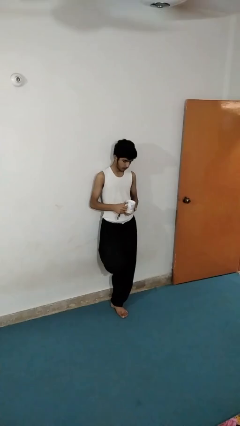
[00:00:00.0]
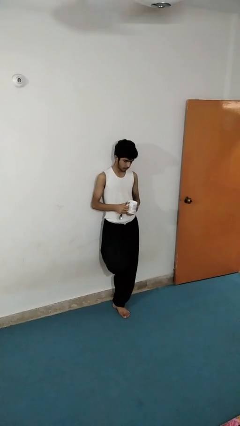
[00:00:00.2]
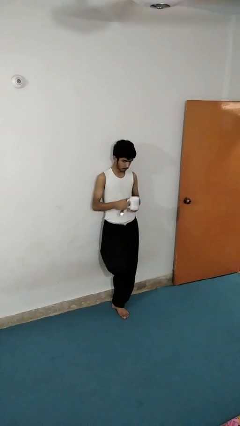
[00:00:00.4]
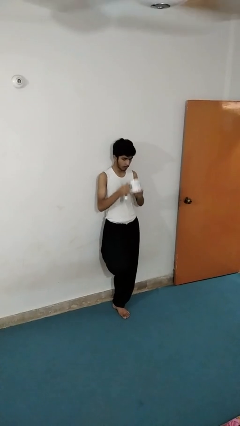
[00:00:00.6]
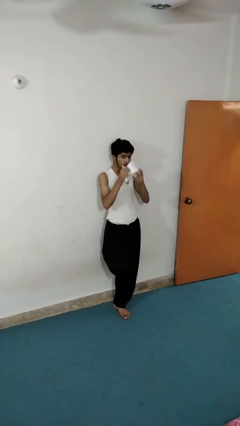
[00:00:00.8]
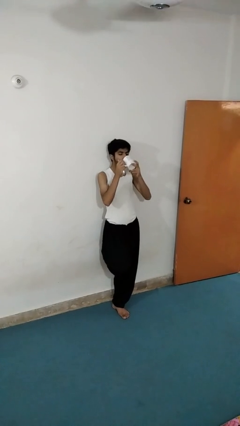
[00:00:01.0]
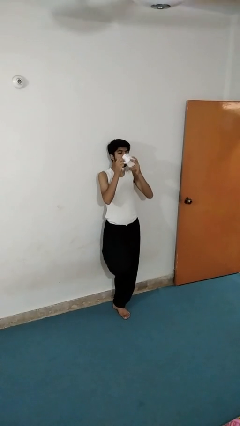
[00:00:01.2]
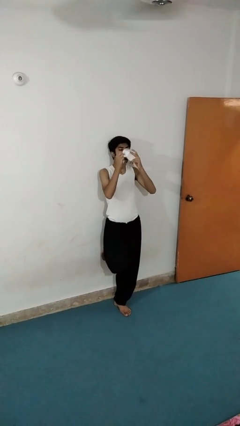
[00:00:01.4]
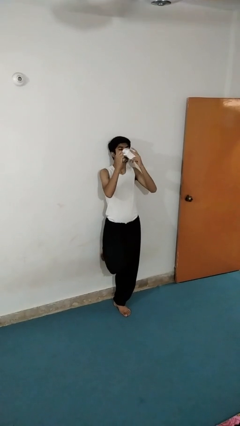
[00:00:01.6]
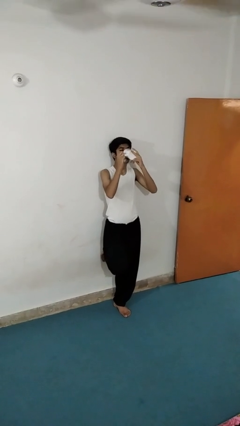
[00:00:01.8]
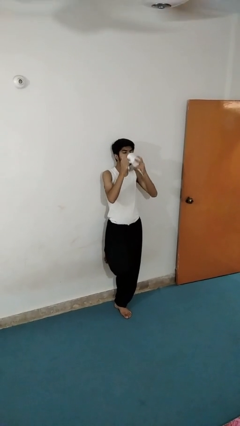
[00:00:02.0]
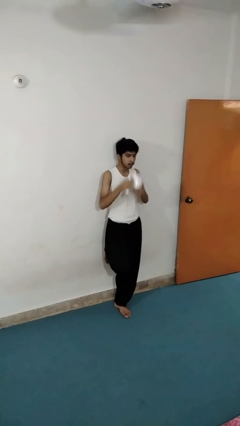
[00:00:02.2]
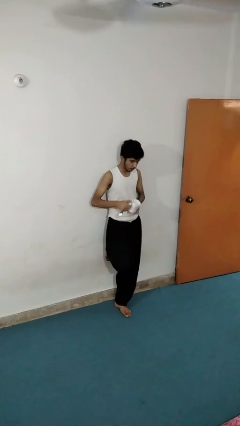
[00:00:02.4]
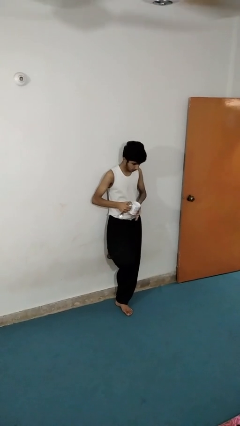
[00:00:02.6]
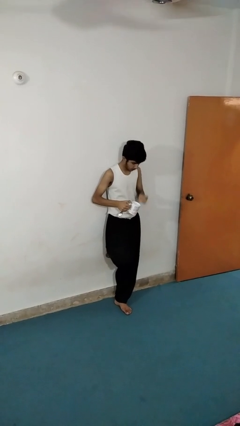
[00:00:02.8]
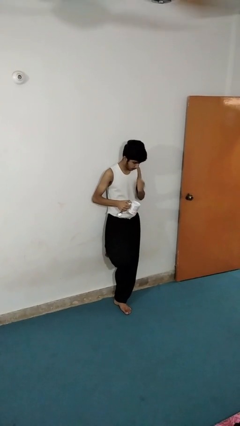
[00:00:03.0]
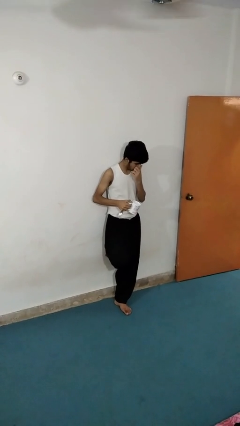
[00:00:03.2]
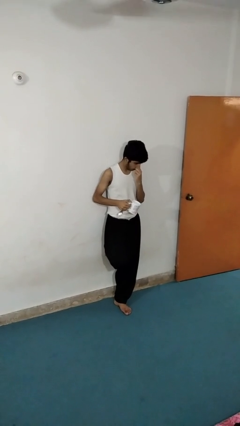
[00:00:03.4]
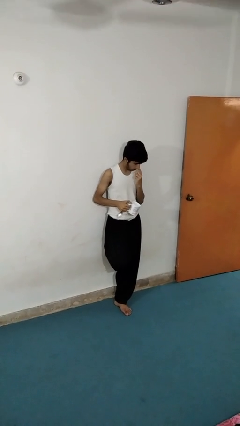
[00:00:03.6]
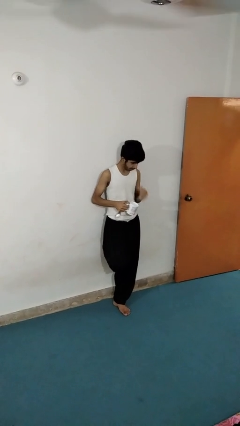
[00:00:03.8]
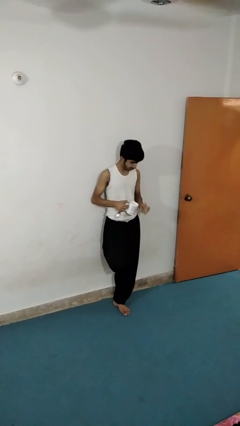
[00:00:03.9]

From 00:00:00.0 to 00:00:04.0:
person drinks from mug

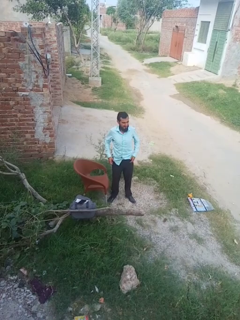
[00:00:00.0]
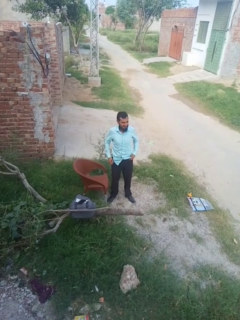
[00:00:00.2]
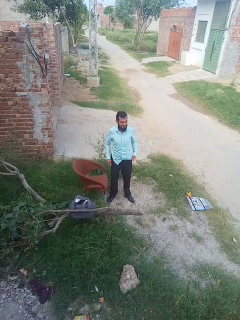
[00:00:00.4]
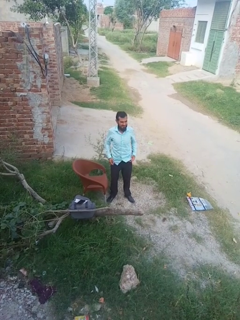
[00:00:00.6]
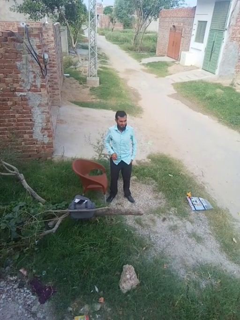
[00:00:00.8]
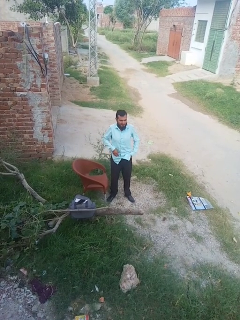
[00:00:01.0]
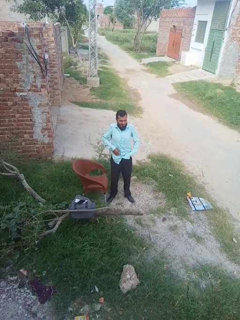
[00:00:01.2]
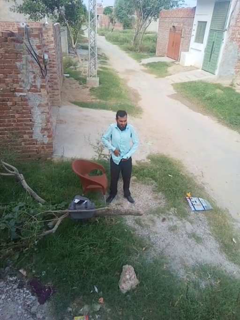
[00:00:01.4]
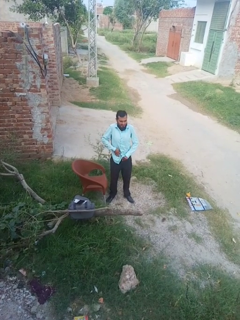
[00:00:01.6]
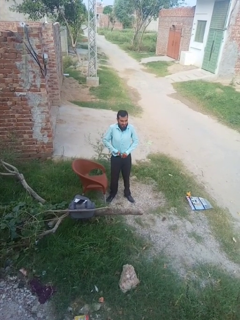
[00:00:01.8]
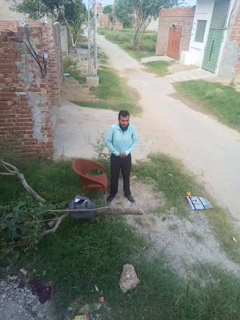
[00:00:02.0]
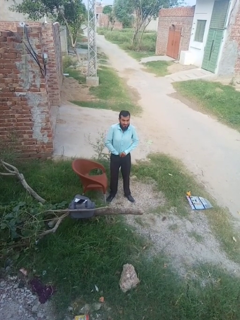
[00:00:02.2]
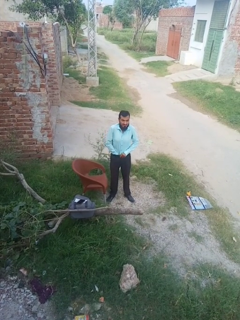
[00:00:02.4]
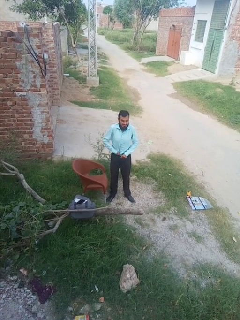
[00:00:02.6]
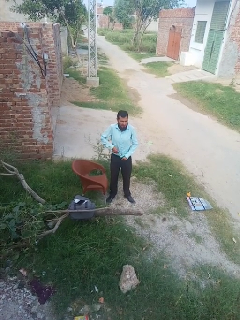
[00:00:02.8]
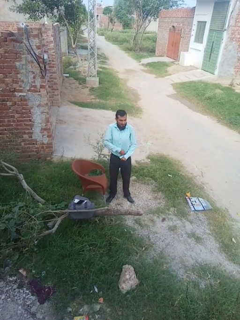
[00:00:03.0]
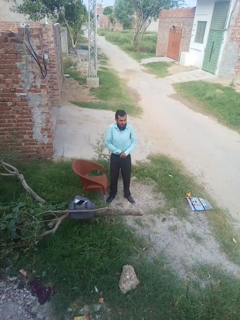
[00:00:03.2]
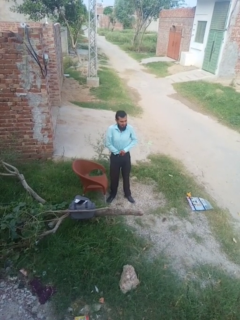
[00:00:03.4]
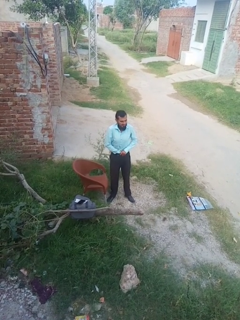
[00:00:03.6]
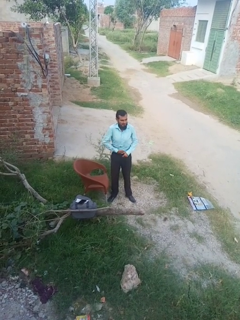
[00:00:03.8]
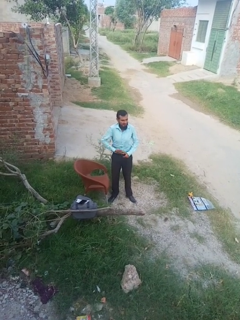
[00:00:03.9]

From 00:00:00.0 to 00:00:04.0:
person tucks in shirt

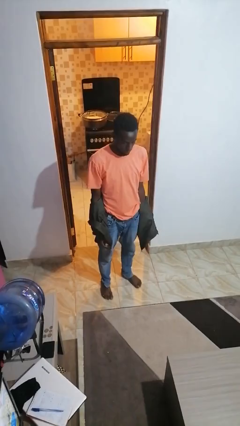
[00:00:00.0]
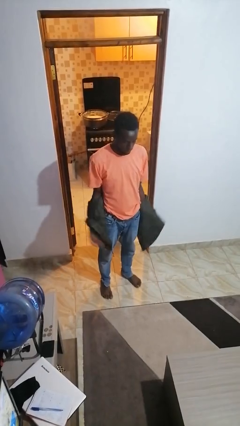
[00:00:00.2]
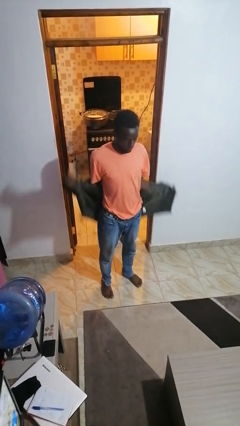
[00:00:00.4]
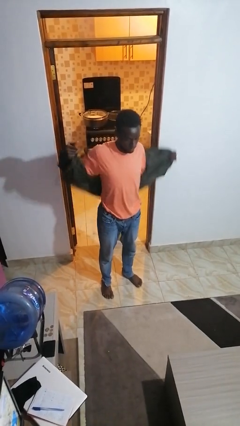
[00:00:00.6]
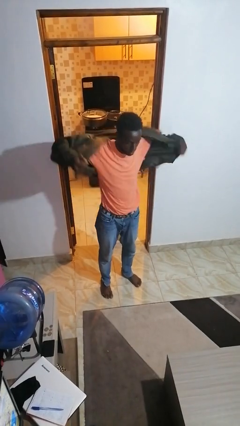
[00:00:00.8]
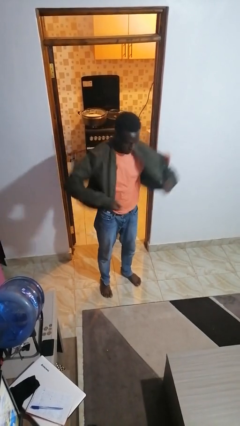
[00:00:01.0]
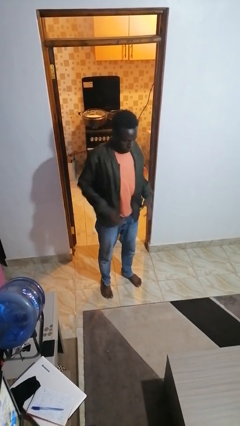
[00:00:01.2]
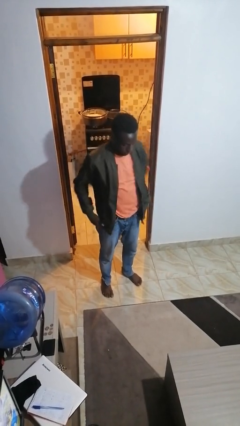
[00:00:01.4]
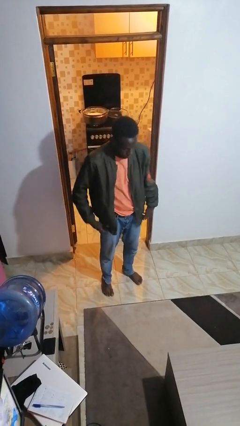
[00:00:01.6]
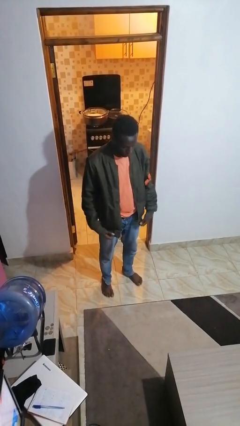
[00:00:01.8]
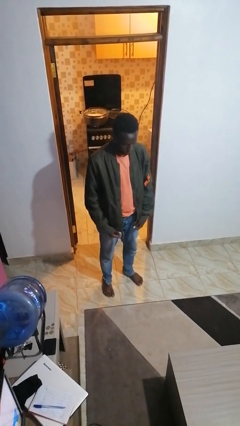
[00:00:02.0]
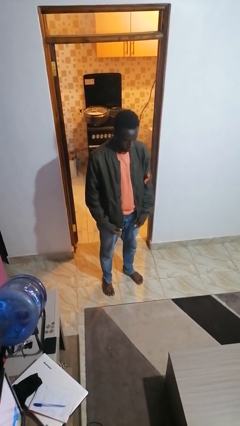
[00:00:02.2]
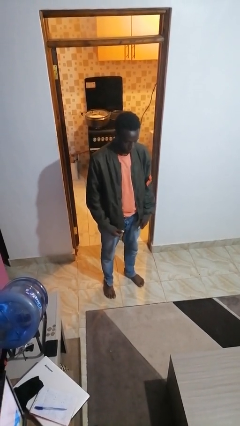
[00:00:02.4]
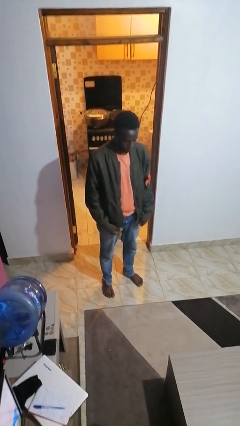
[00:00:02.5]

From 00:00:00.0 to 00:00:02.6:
person puts on jacket

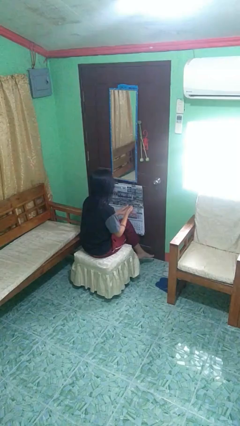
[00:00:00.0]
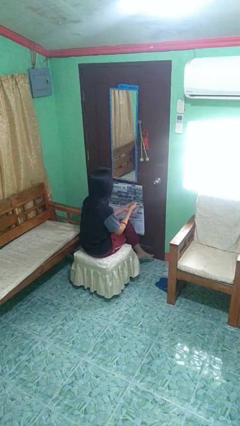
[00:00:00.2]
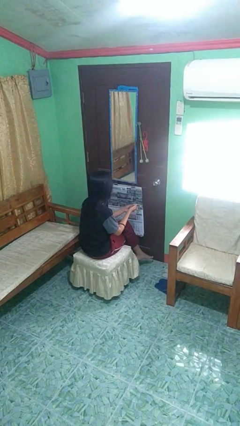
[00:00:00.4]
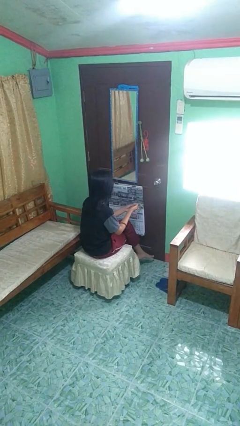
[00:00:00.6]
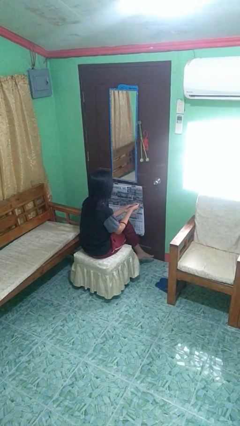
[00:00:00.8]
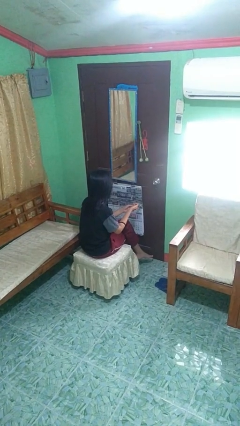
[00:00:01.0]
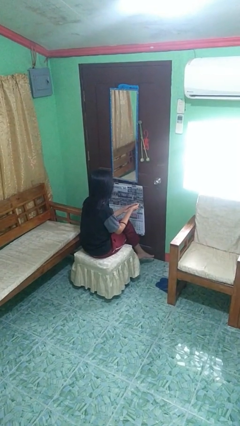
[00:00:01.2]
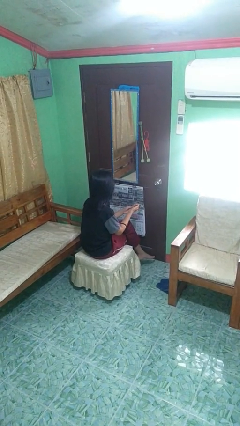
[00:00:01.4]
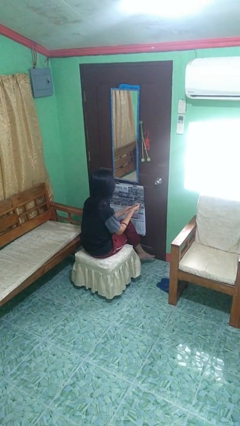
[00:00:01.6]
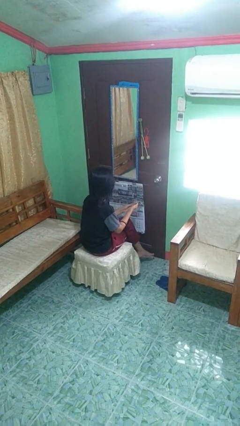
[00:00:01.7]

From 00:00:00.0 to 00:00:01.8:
person cracks knuckles

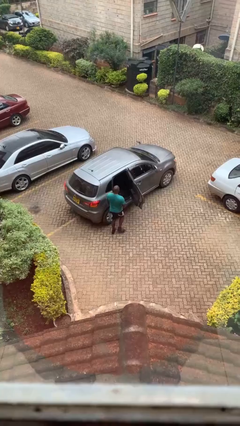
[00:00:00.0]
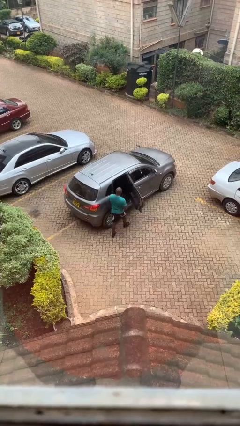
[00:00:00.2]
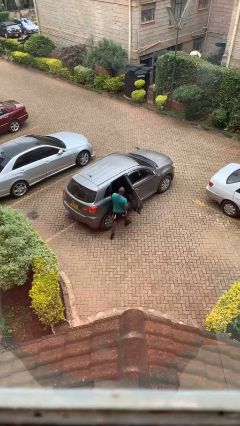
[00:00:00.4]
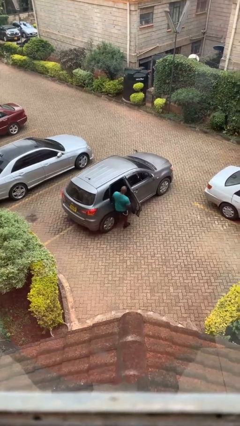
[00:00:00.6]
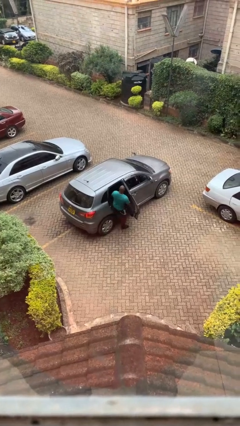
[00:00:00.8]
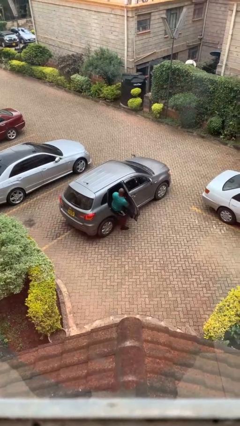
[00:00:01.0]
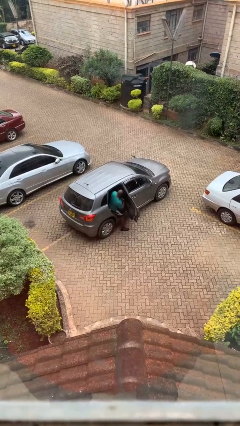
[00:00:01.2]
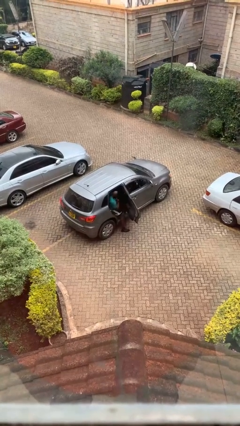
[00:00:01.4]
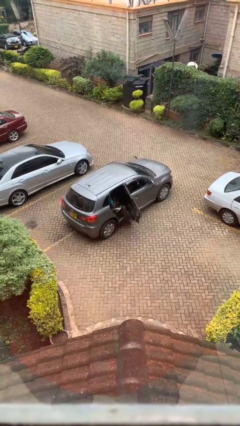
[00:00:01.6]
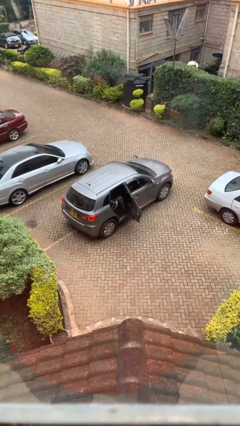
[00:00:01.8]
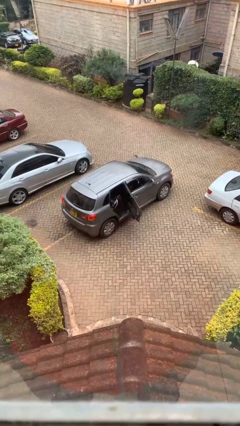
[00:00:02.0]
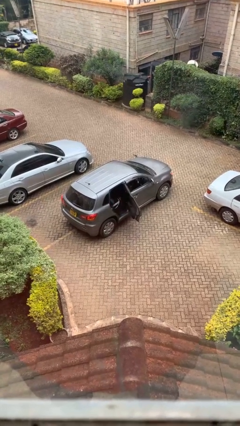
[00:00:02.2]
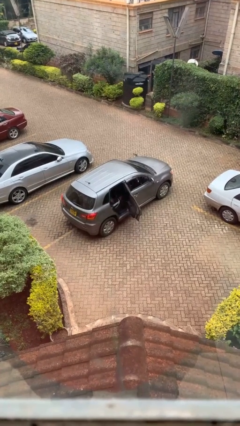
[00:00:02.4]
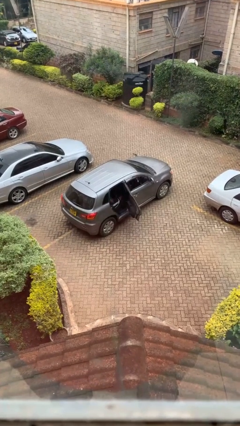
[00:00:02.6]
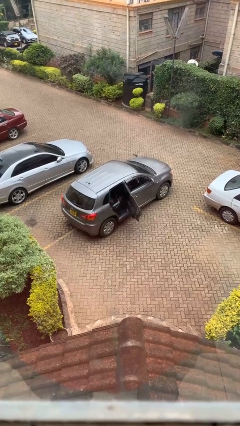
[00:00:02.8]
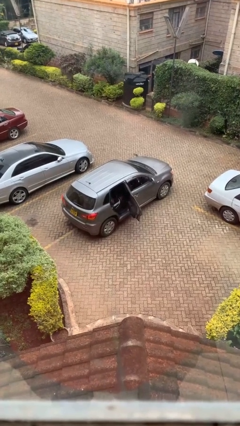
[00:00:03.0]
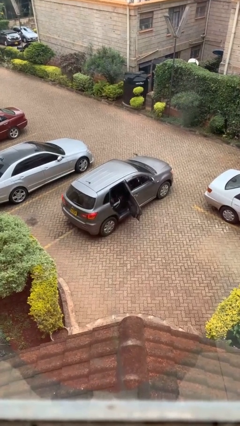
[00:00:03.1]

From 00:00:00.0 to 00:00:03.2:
person enters car

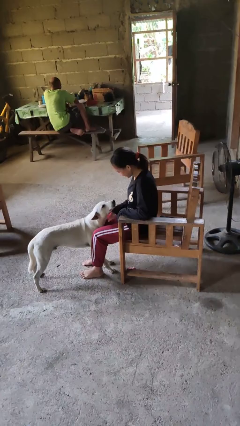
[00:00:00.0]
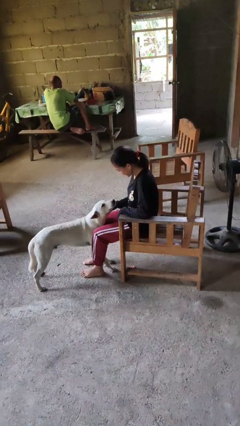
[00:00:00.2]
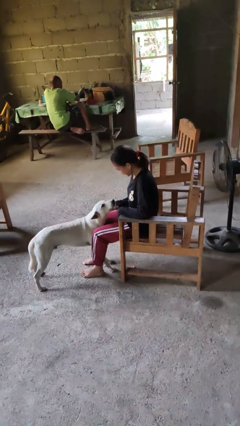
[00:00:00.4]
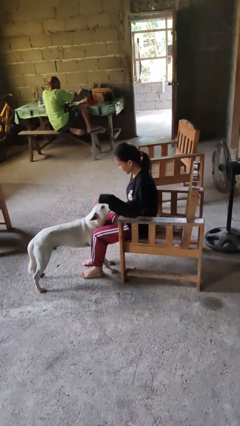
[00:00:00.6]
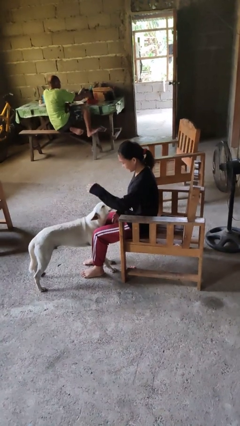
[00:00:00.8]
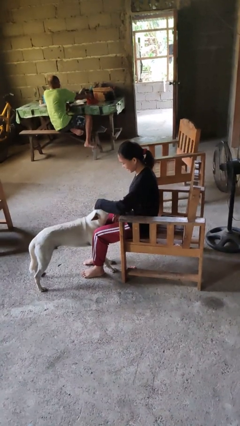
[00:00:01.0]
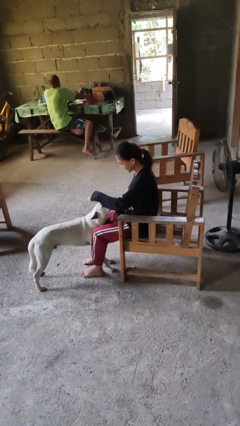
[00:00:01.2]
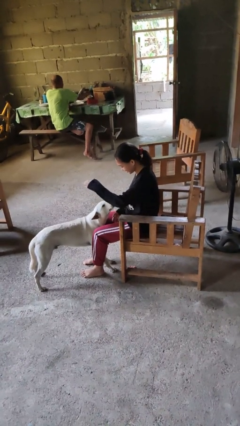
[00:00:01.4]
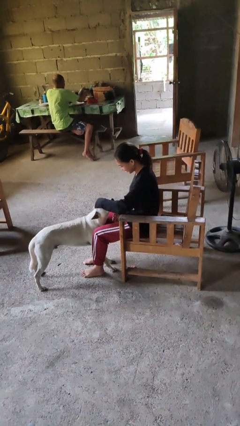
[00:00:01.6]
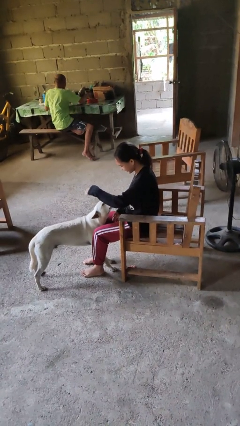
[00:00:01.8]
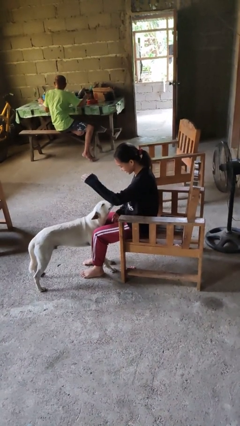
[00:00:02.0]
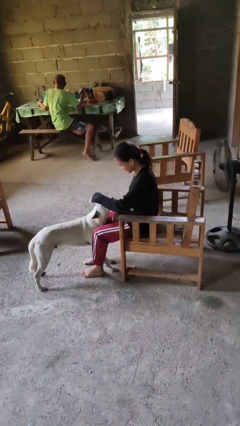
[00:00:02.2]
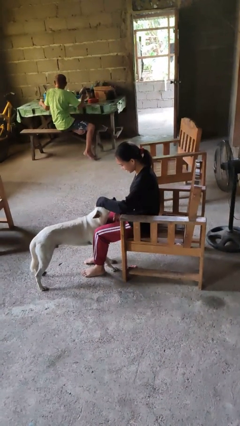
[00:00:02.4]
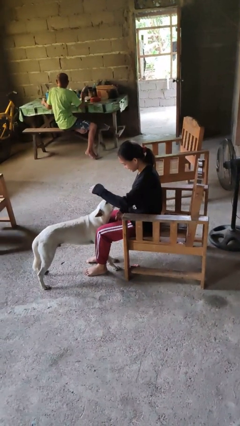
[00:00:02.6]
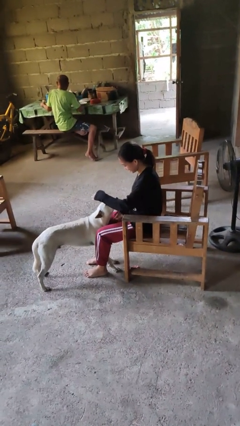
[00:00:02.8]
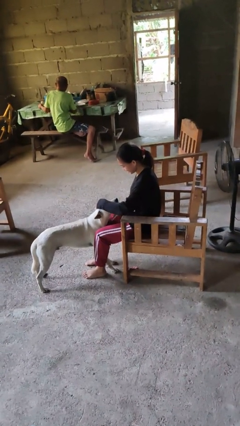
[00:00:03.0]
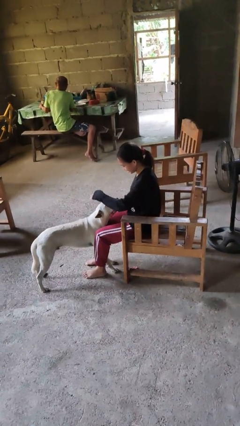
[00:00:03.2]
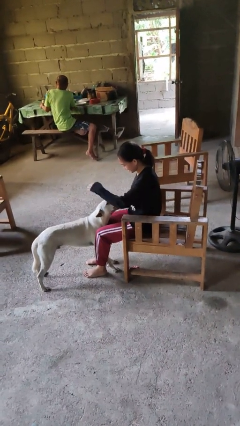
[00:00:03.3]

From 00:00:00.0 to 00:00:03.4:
person pets dog
